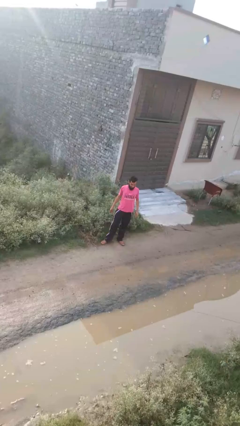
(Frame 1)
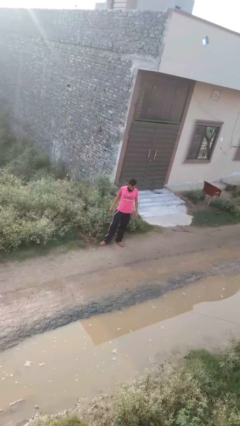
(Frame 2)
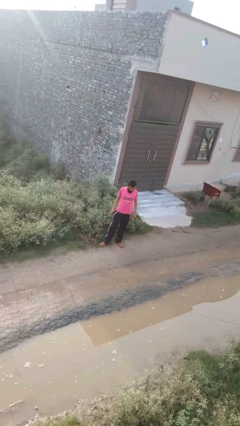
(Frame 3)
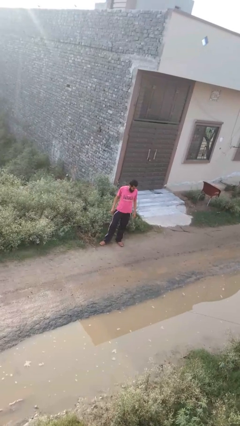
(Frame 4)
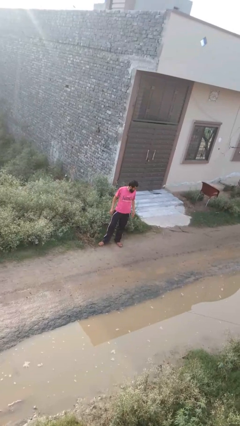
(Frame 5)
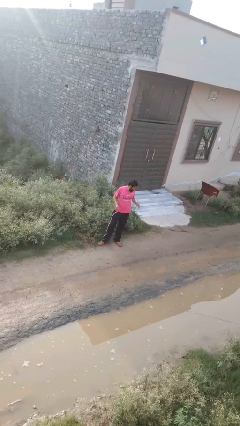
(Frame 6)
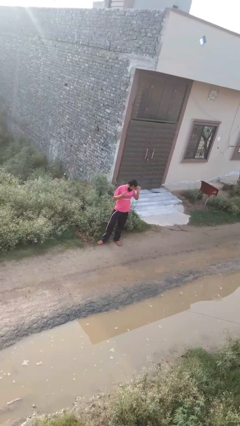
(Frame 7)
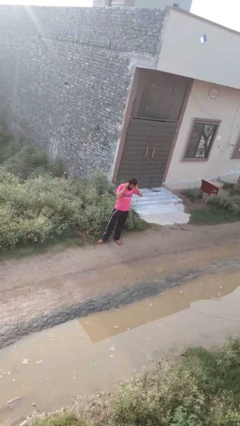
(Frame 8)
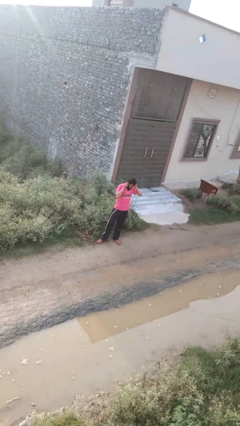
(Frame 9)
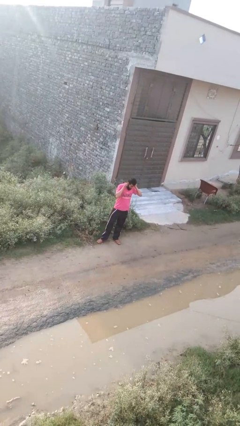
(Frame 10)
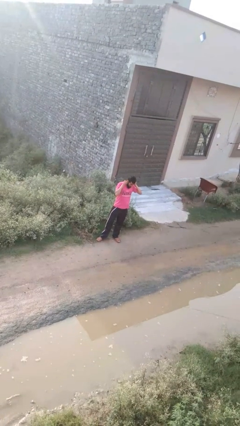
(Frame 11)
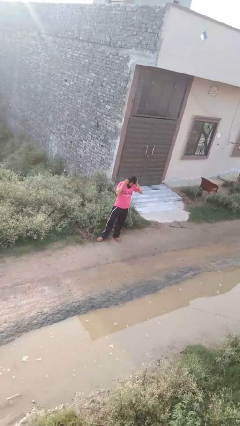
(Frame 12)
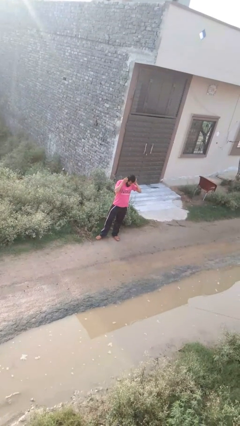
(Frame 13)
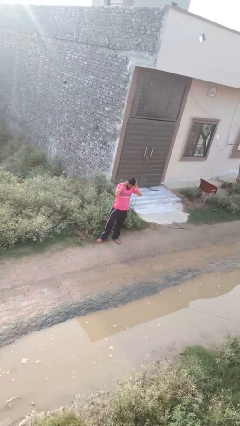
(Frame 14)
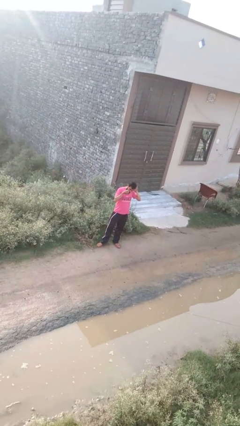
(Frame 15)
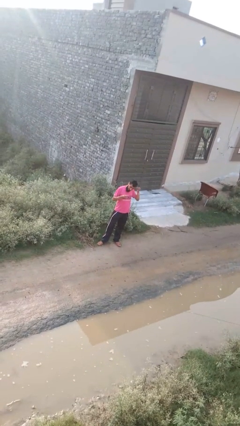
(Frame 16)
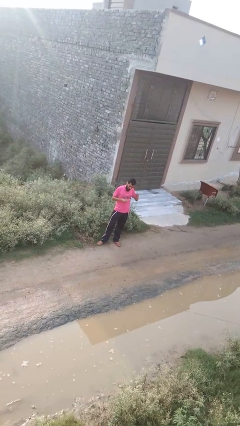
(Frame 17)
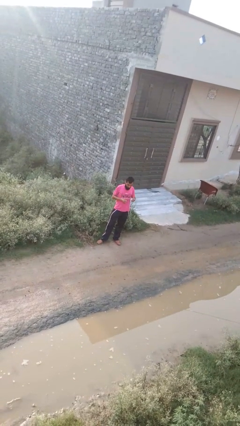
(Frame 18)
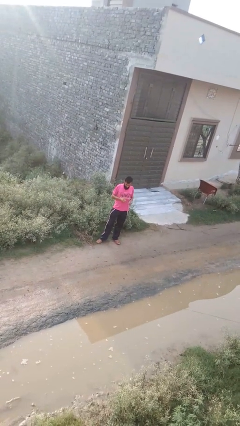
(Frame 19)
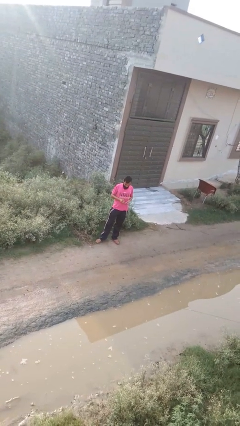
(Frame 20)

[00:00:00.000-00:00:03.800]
person takes off earrings

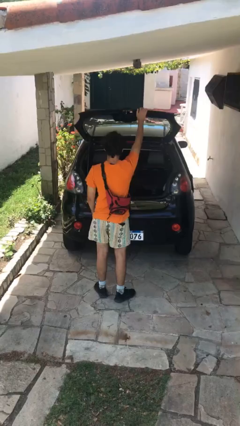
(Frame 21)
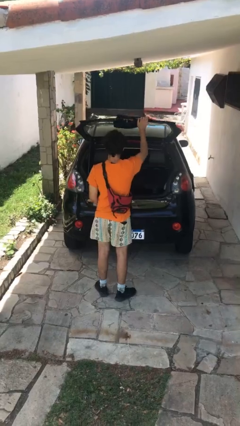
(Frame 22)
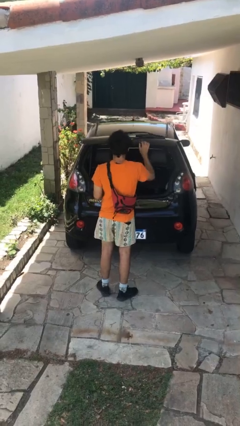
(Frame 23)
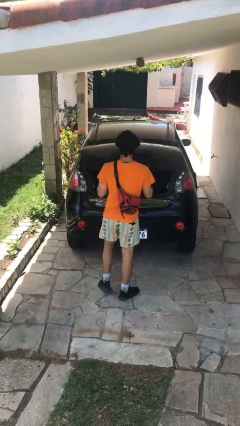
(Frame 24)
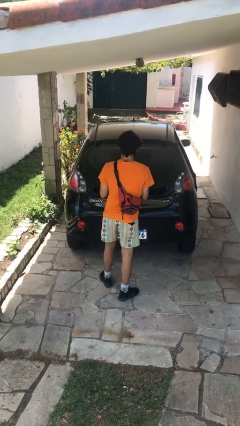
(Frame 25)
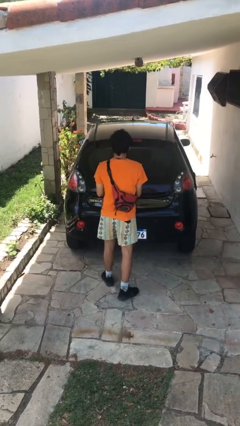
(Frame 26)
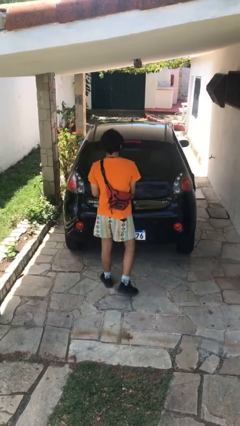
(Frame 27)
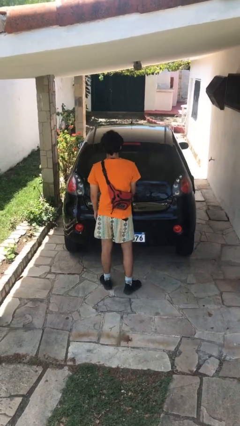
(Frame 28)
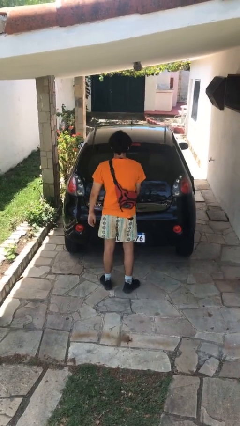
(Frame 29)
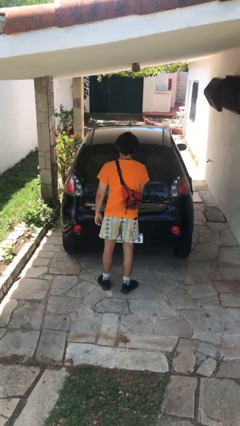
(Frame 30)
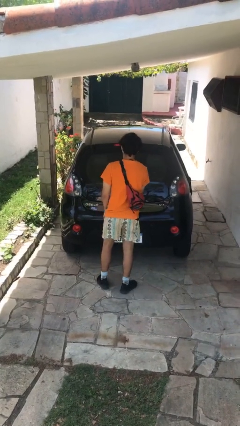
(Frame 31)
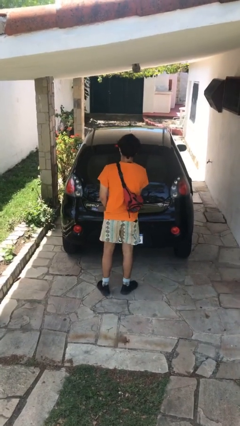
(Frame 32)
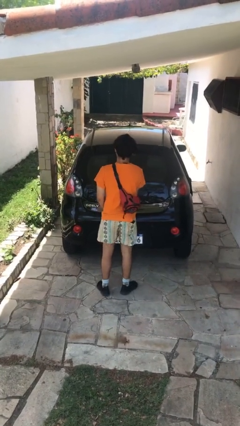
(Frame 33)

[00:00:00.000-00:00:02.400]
person closes car trunk

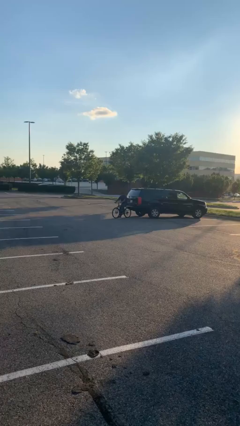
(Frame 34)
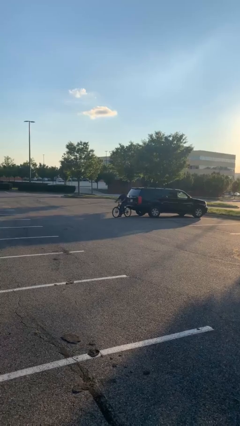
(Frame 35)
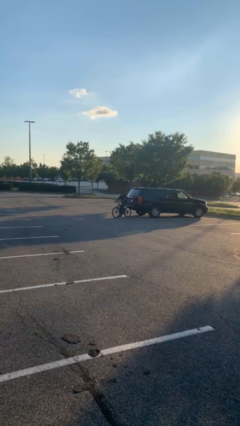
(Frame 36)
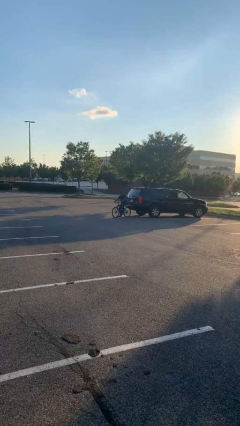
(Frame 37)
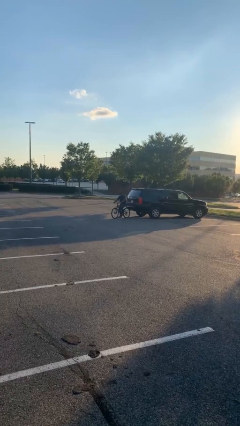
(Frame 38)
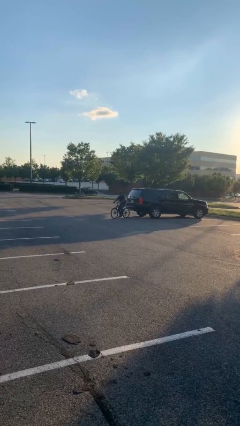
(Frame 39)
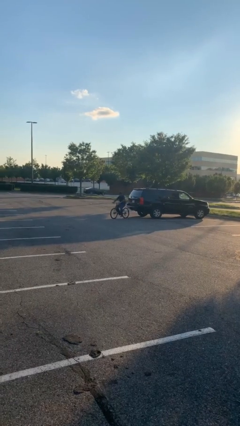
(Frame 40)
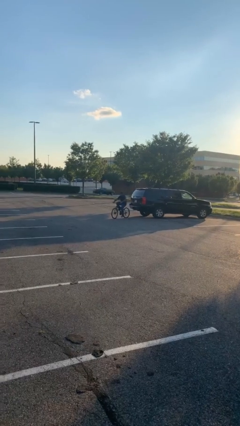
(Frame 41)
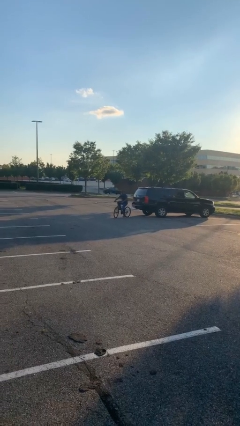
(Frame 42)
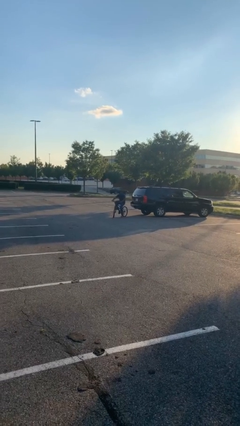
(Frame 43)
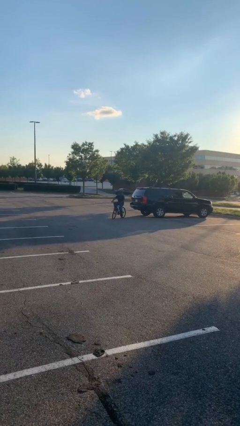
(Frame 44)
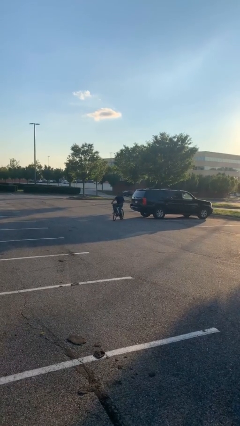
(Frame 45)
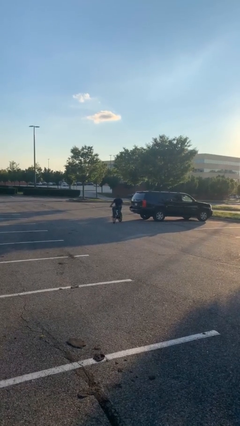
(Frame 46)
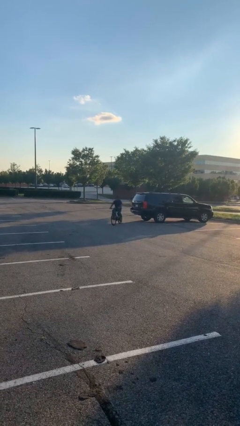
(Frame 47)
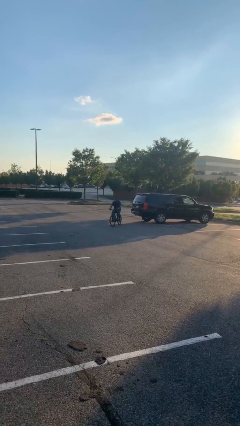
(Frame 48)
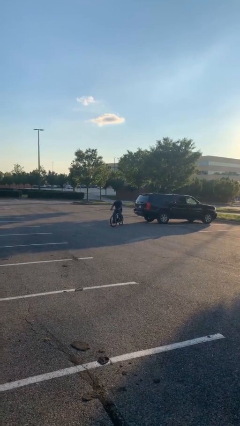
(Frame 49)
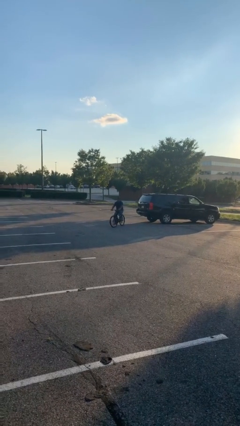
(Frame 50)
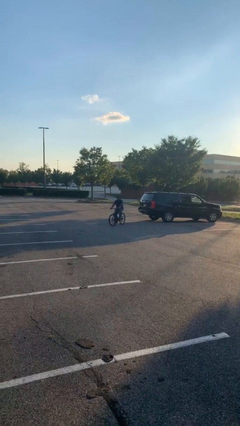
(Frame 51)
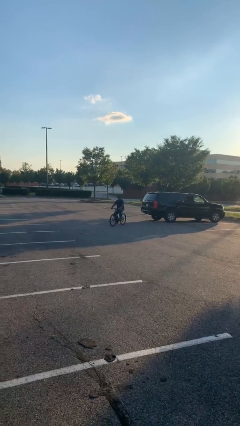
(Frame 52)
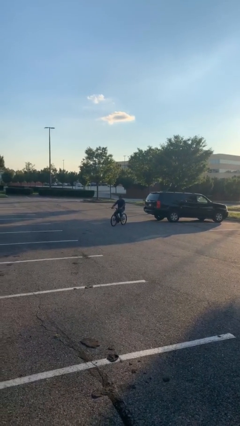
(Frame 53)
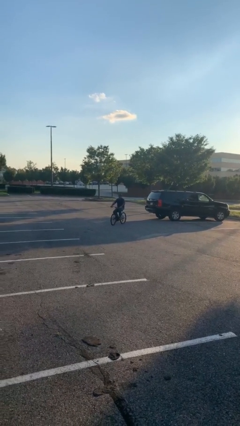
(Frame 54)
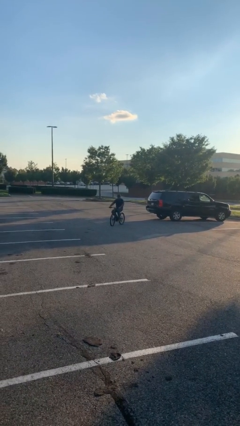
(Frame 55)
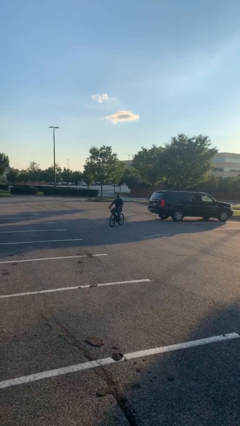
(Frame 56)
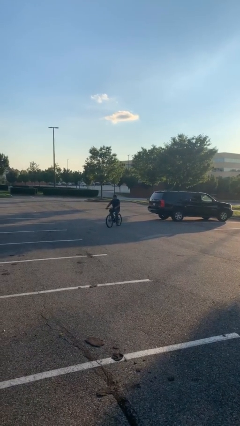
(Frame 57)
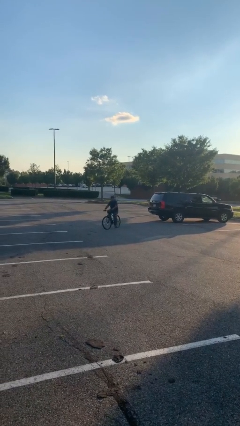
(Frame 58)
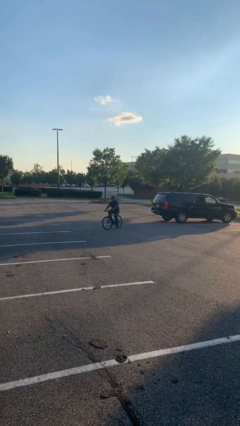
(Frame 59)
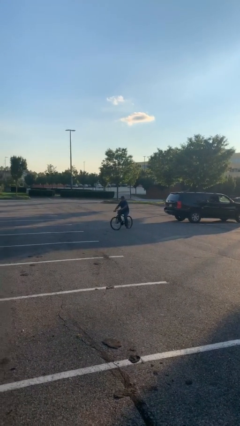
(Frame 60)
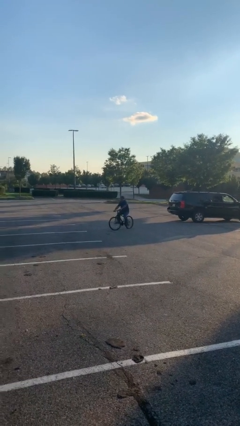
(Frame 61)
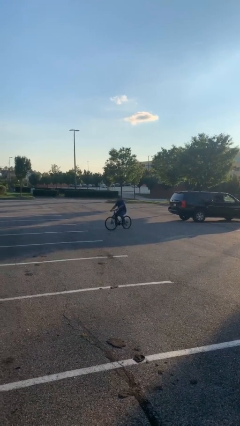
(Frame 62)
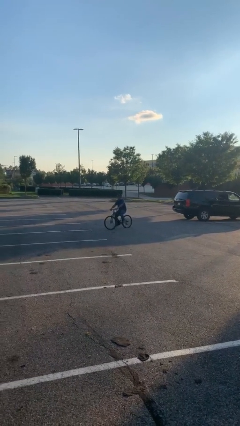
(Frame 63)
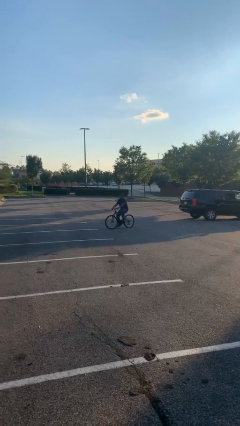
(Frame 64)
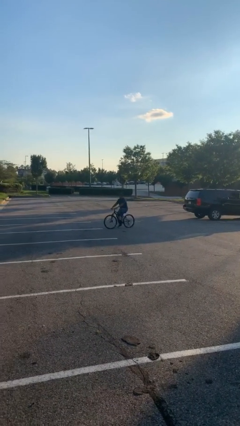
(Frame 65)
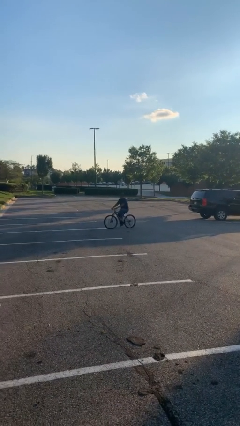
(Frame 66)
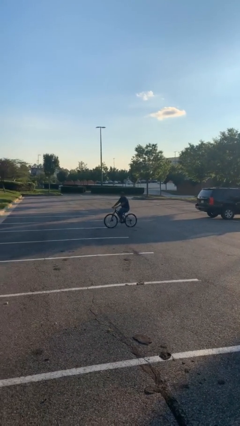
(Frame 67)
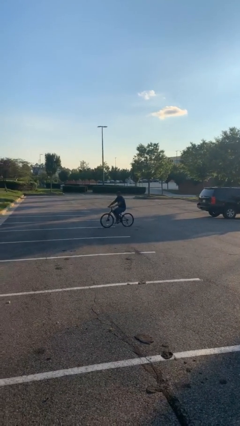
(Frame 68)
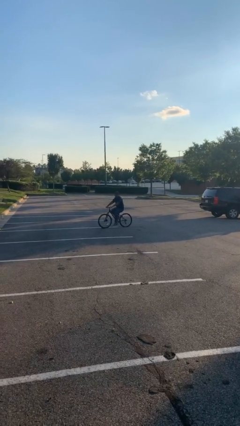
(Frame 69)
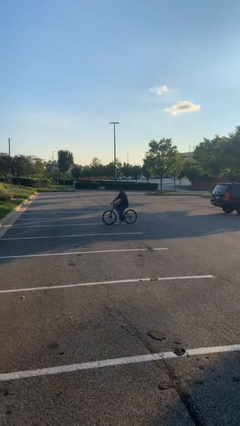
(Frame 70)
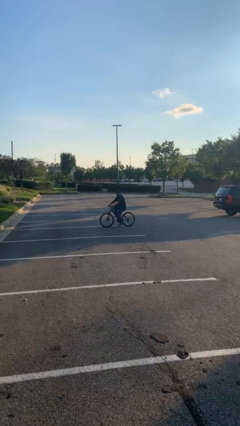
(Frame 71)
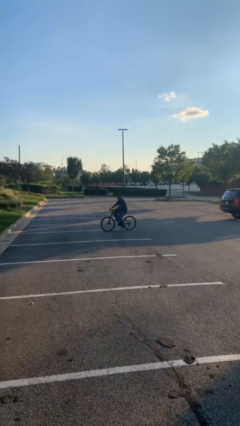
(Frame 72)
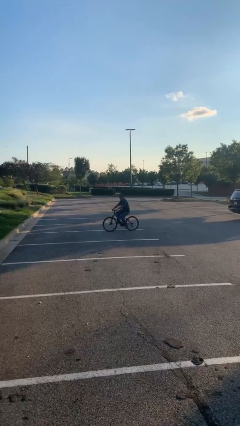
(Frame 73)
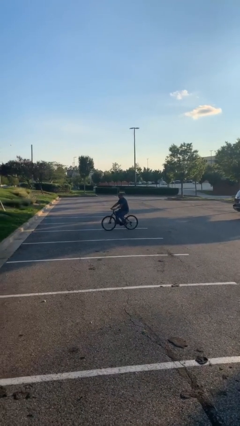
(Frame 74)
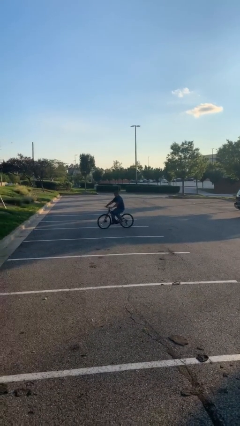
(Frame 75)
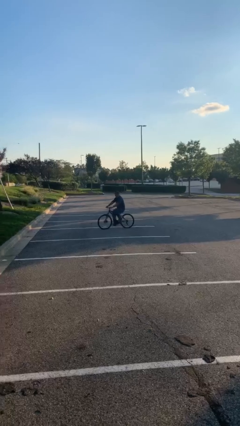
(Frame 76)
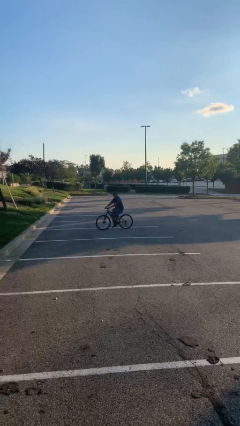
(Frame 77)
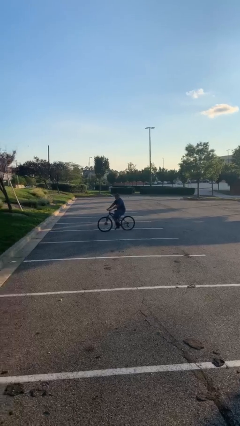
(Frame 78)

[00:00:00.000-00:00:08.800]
person rides bicycle

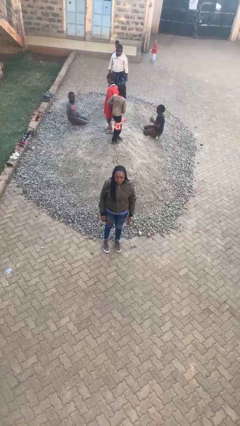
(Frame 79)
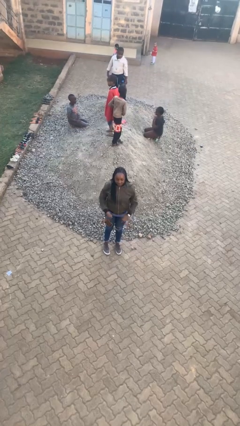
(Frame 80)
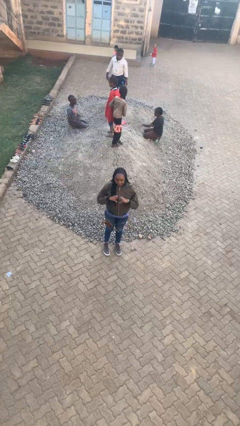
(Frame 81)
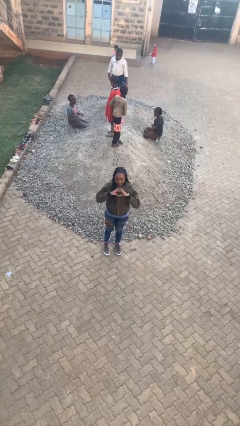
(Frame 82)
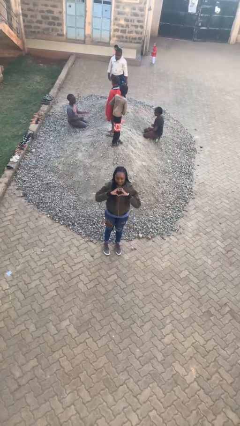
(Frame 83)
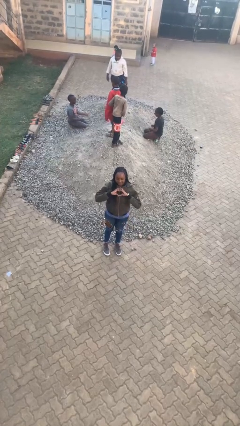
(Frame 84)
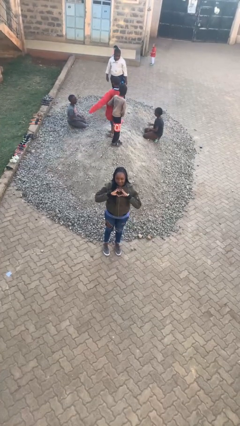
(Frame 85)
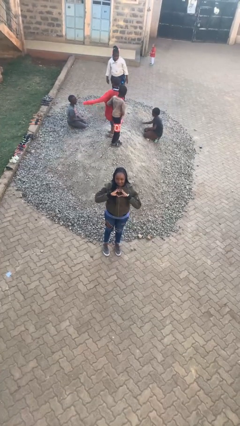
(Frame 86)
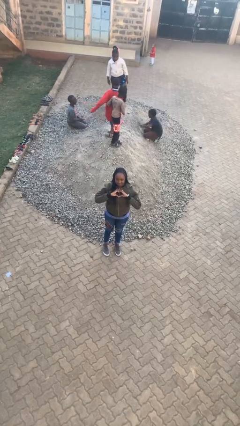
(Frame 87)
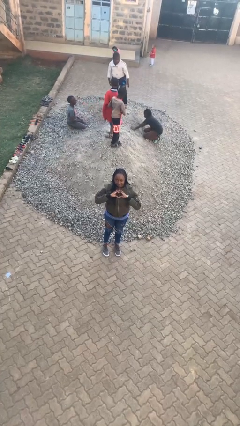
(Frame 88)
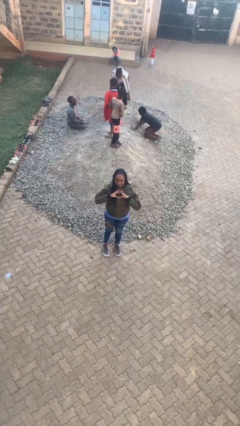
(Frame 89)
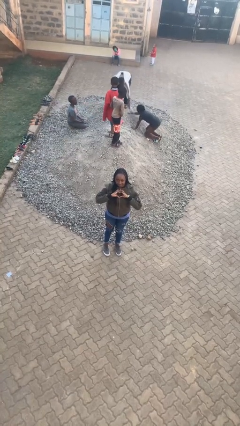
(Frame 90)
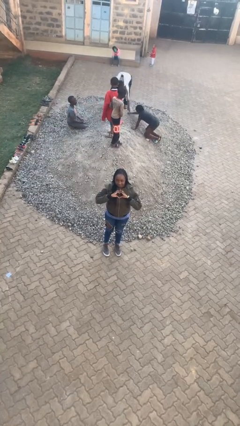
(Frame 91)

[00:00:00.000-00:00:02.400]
person gestures heart

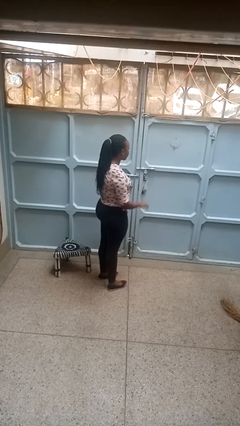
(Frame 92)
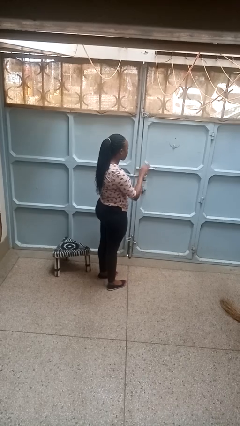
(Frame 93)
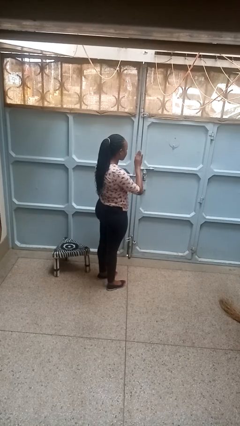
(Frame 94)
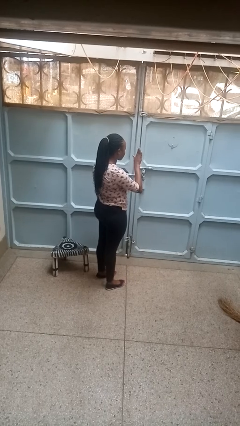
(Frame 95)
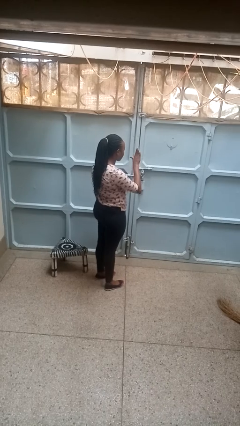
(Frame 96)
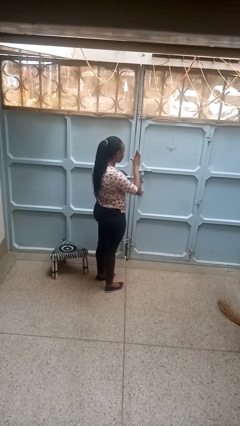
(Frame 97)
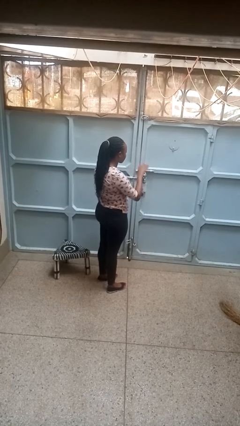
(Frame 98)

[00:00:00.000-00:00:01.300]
person gestures stop
